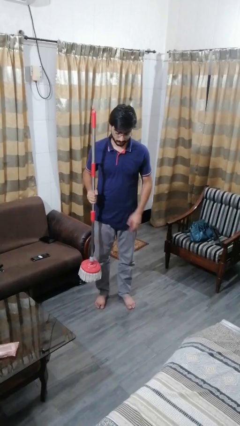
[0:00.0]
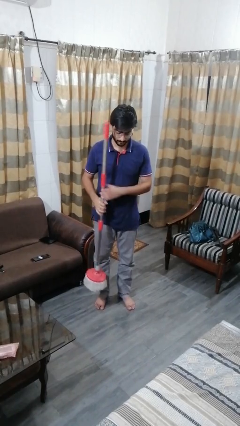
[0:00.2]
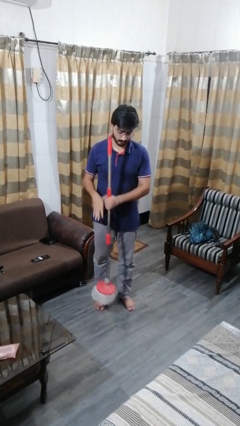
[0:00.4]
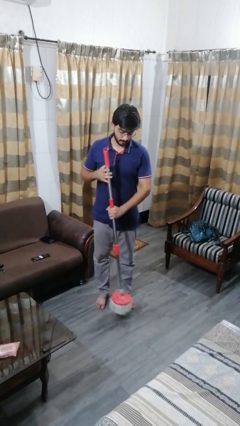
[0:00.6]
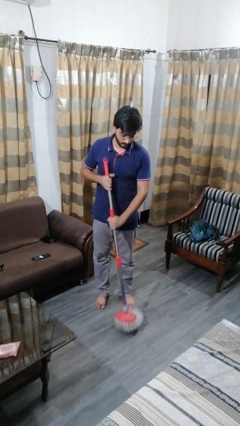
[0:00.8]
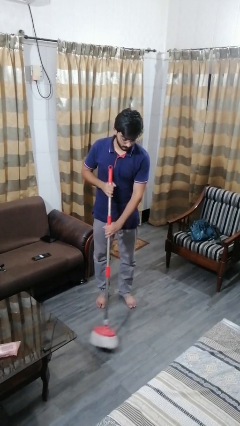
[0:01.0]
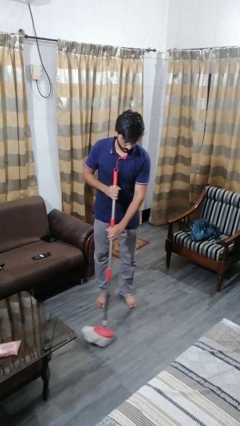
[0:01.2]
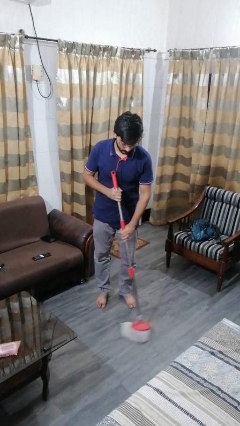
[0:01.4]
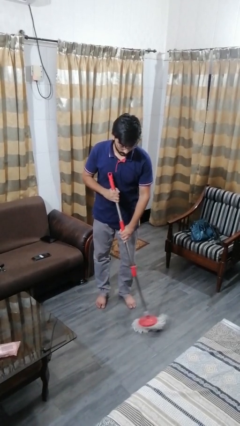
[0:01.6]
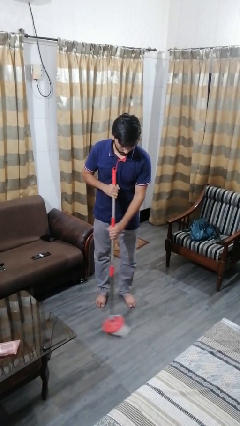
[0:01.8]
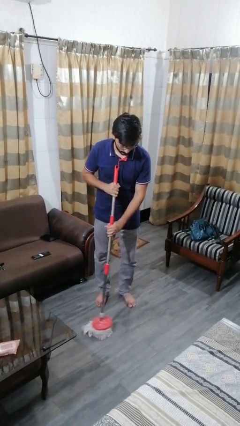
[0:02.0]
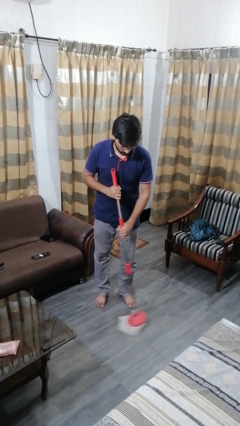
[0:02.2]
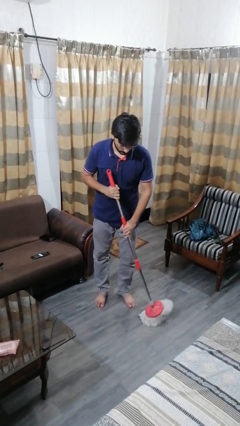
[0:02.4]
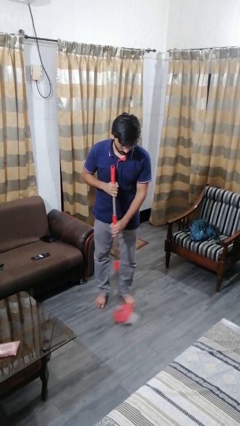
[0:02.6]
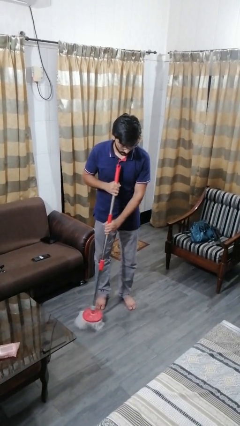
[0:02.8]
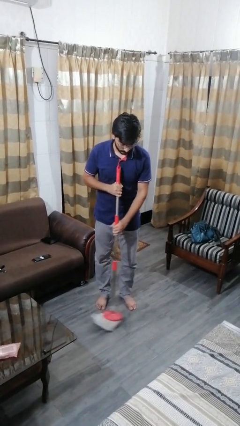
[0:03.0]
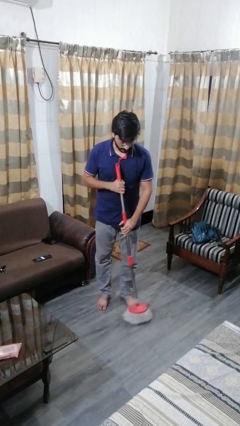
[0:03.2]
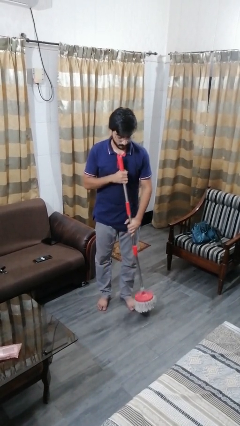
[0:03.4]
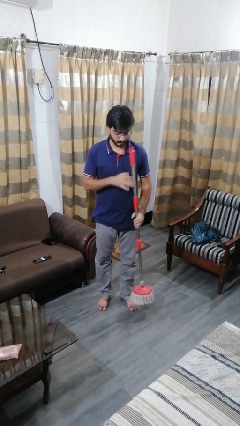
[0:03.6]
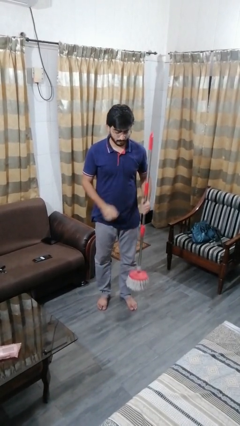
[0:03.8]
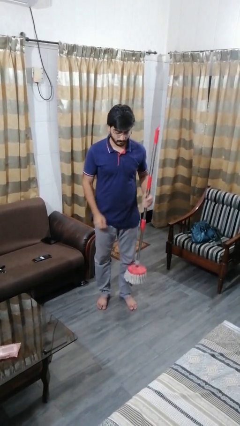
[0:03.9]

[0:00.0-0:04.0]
person sweeps floor

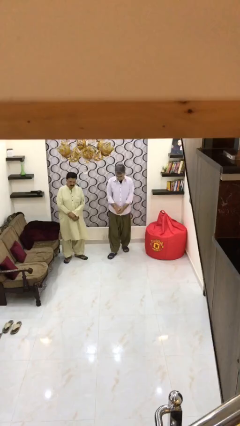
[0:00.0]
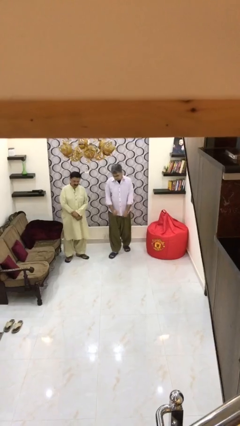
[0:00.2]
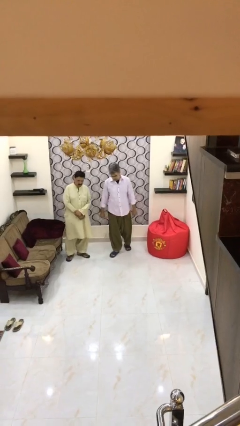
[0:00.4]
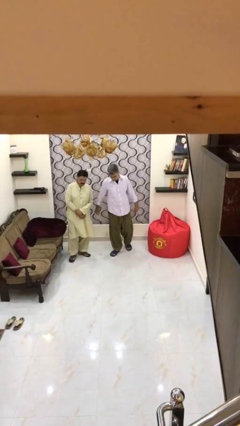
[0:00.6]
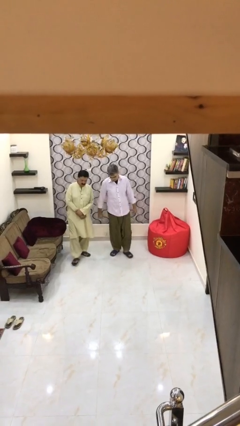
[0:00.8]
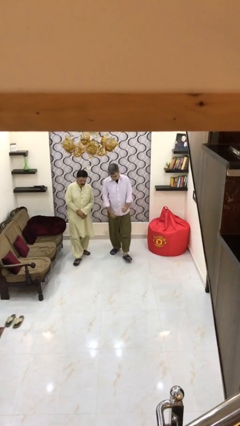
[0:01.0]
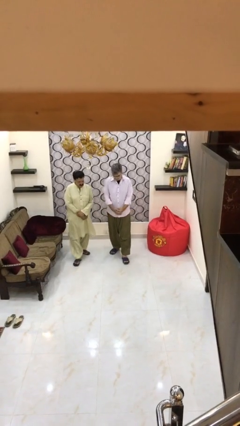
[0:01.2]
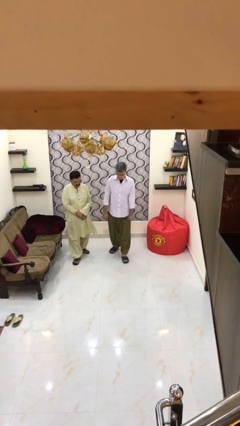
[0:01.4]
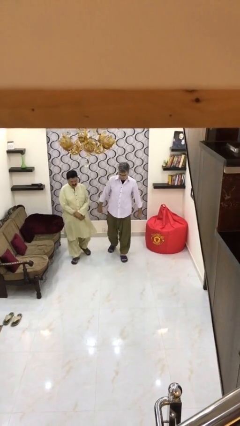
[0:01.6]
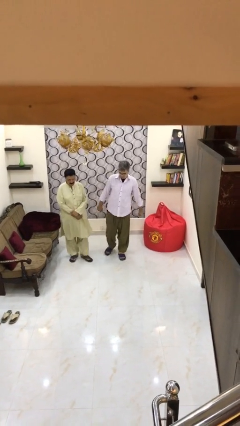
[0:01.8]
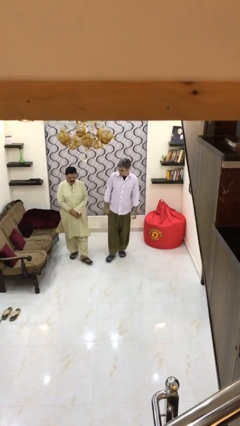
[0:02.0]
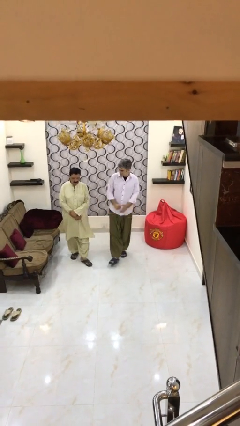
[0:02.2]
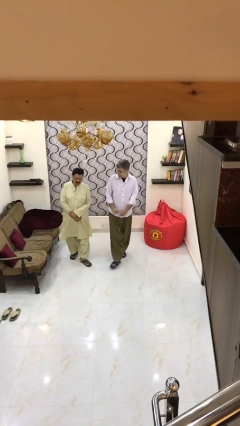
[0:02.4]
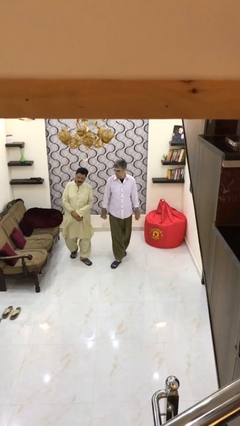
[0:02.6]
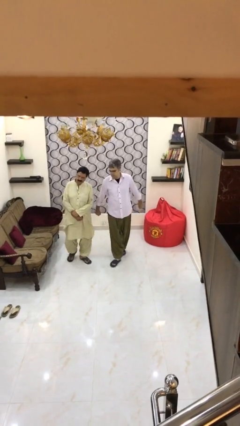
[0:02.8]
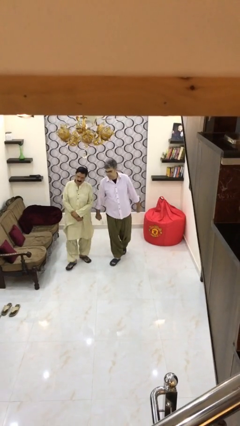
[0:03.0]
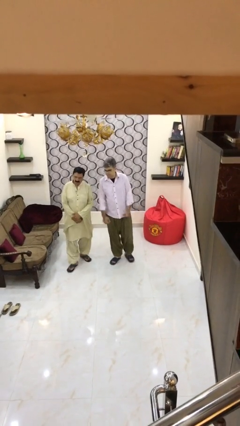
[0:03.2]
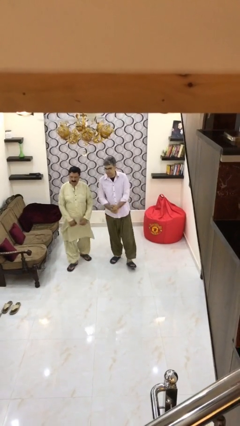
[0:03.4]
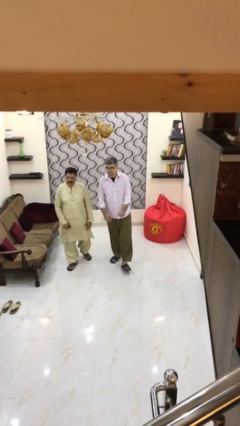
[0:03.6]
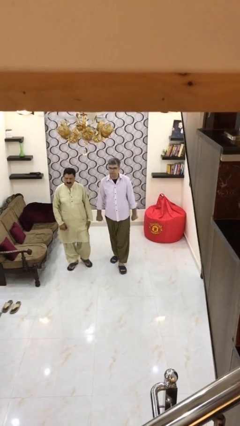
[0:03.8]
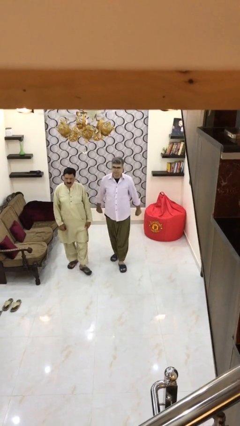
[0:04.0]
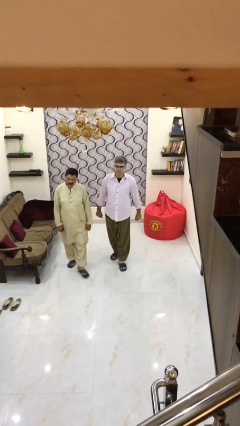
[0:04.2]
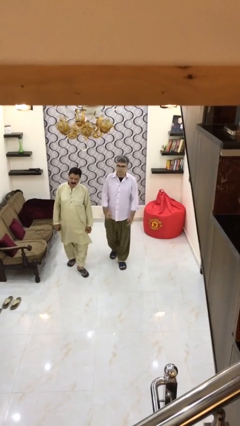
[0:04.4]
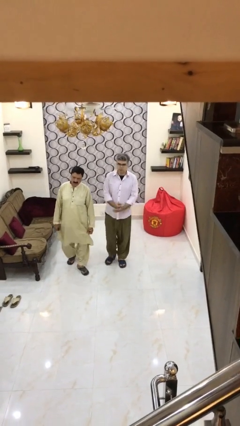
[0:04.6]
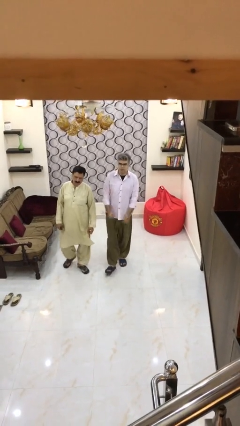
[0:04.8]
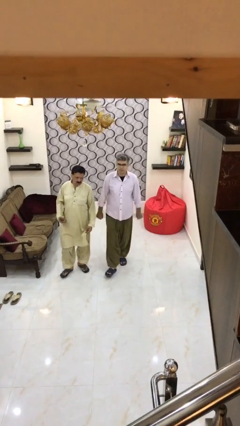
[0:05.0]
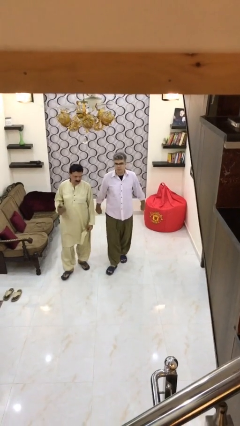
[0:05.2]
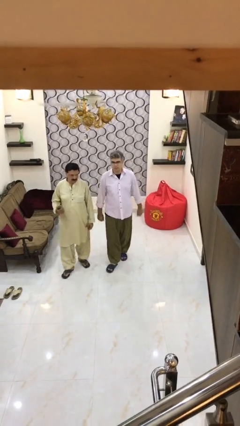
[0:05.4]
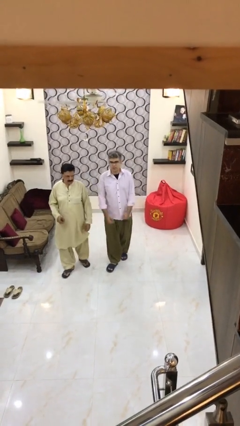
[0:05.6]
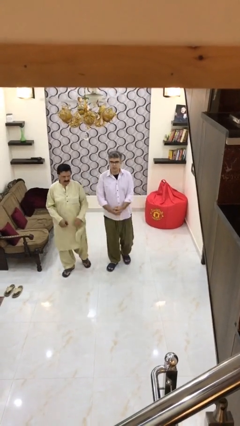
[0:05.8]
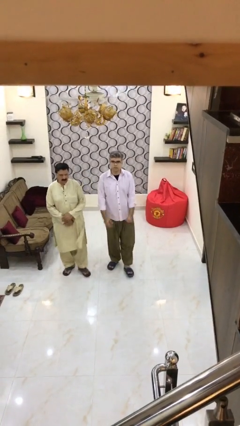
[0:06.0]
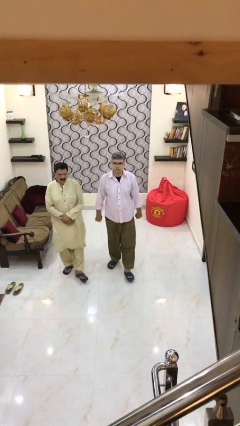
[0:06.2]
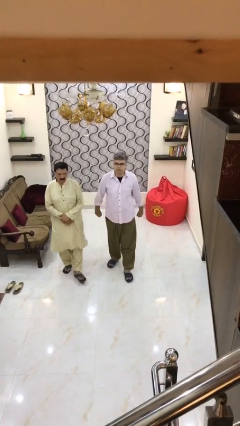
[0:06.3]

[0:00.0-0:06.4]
person talks to person

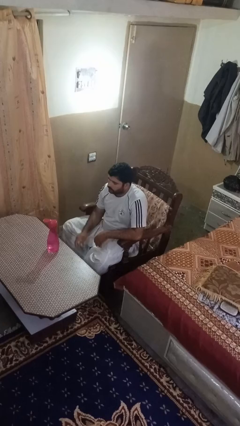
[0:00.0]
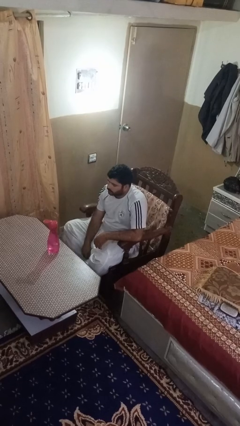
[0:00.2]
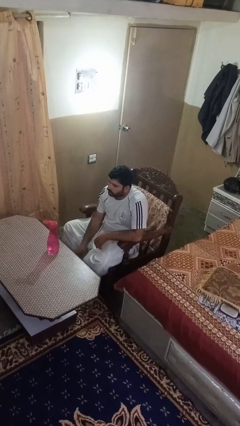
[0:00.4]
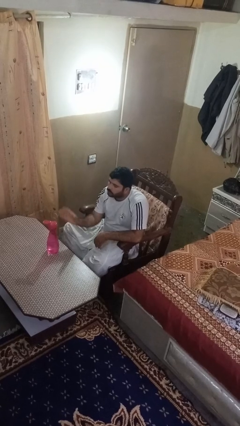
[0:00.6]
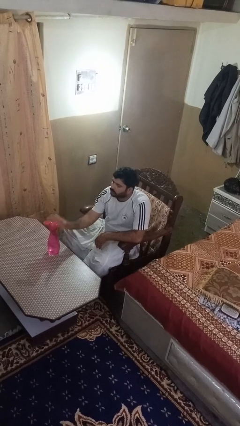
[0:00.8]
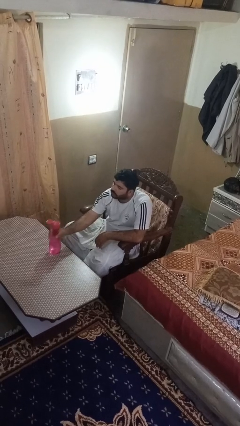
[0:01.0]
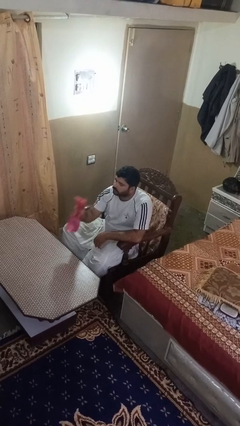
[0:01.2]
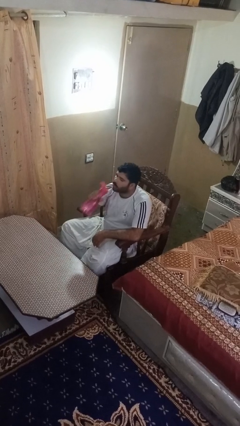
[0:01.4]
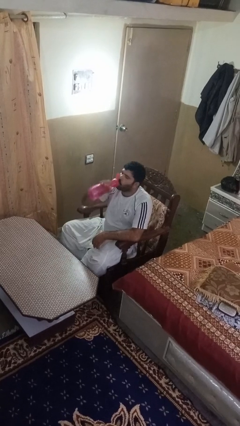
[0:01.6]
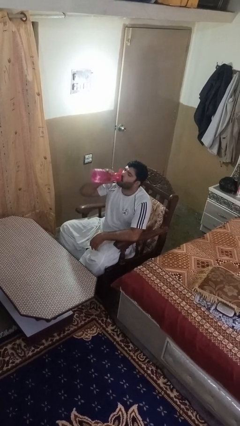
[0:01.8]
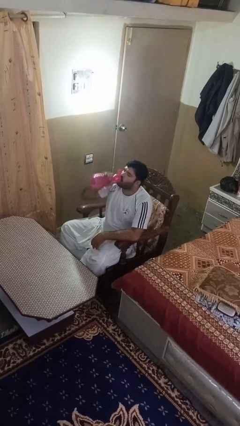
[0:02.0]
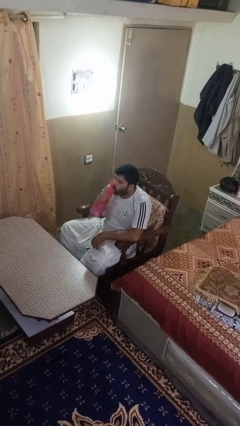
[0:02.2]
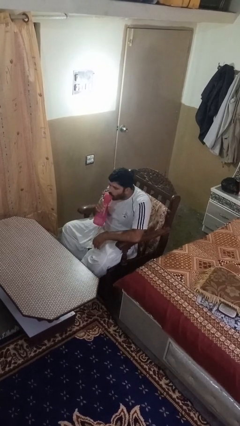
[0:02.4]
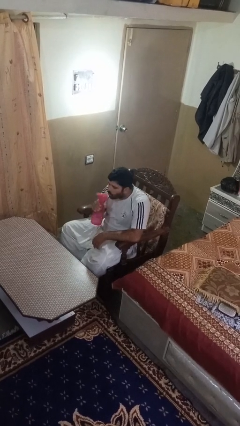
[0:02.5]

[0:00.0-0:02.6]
person drinks from bottle

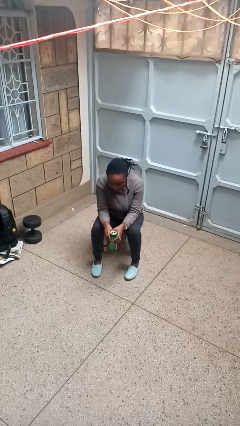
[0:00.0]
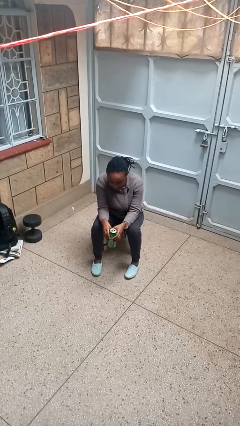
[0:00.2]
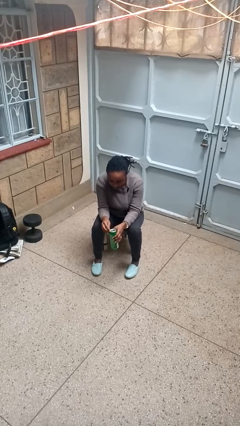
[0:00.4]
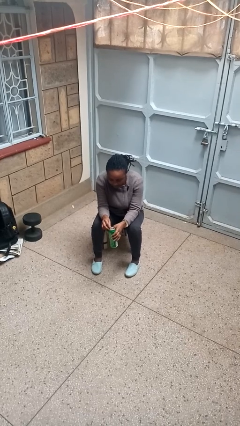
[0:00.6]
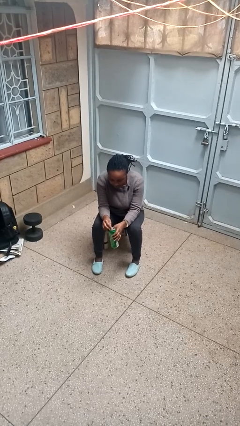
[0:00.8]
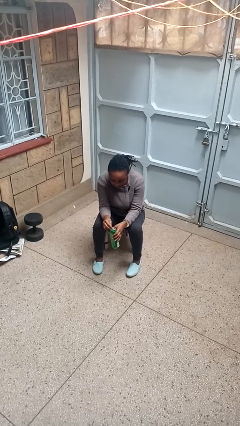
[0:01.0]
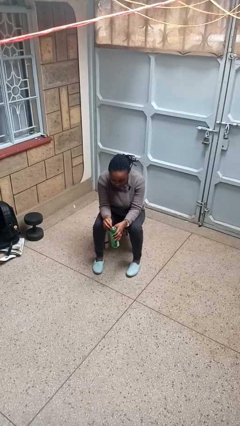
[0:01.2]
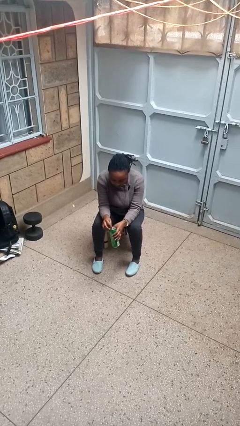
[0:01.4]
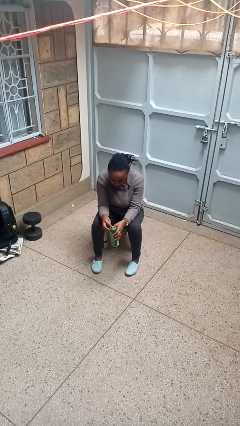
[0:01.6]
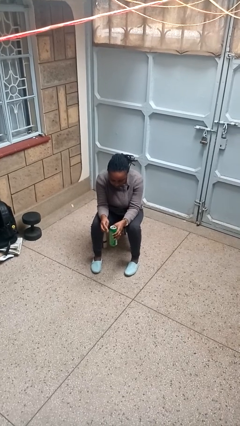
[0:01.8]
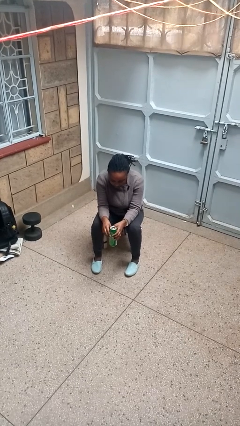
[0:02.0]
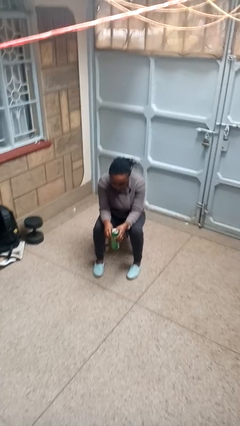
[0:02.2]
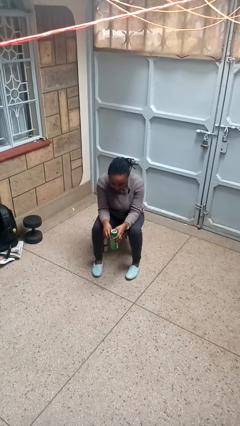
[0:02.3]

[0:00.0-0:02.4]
person opens beverage can

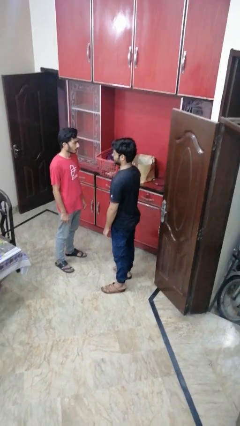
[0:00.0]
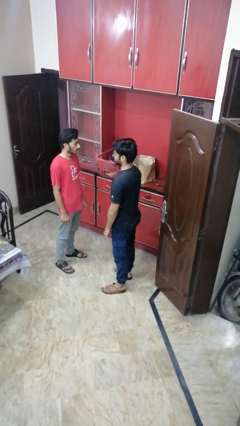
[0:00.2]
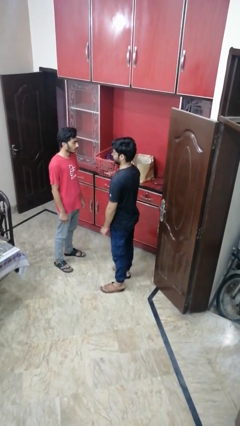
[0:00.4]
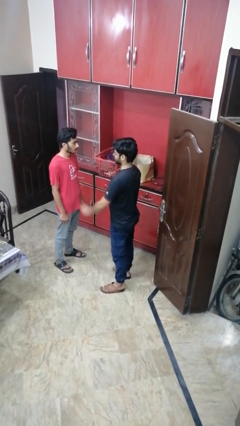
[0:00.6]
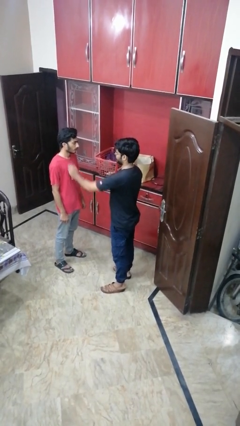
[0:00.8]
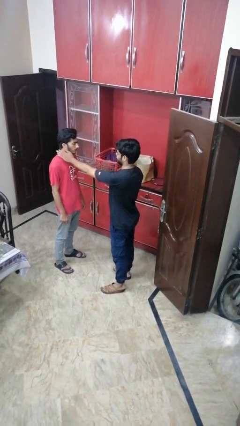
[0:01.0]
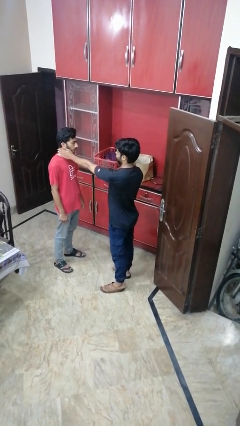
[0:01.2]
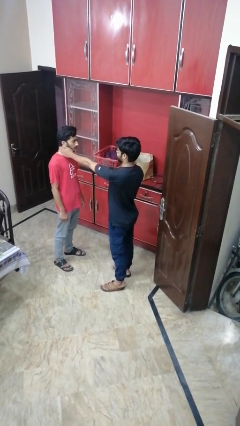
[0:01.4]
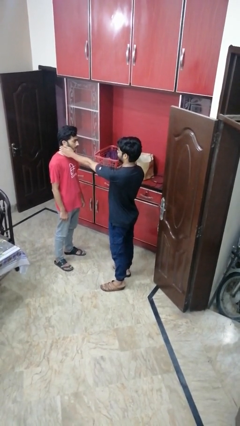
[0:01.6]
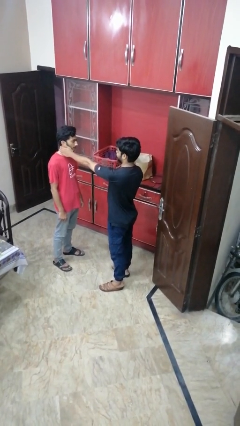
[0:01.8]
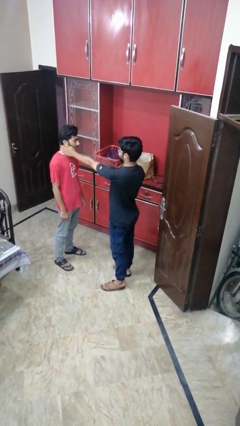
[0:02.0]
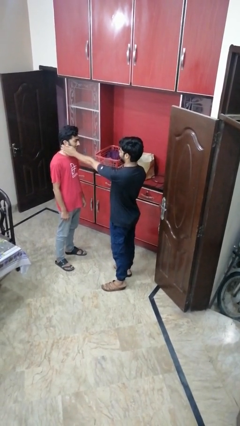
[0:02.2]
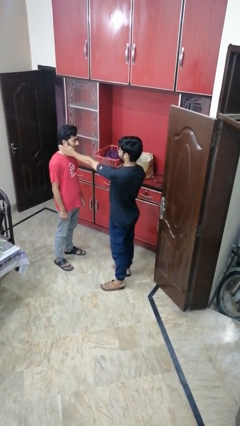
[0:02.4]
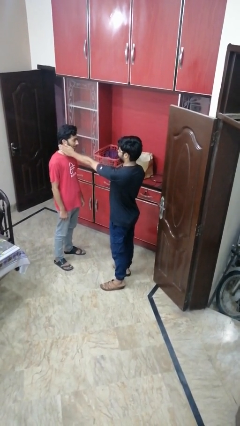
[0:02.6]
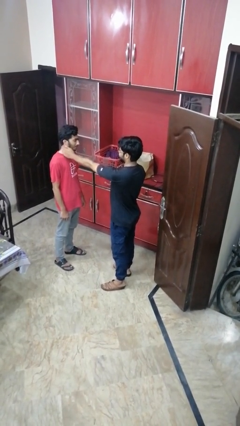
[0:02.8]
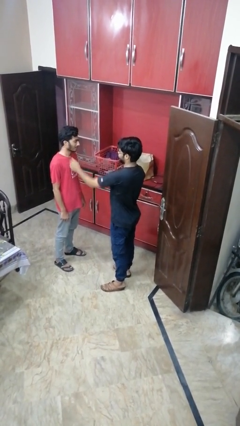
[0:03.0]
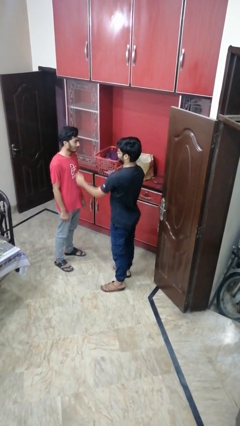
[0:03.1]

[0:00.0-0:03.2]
person touches face of person
